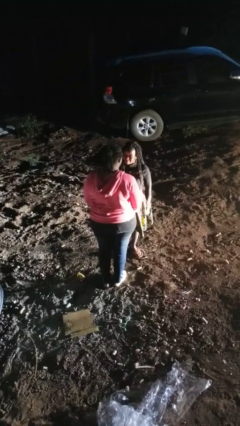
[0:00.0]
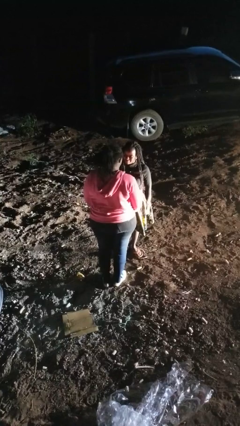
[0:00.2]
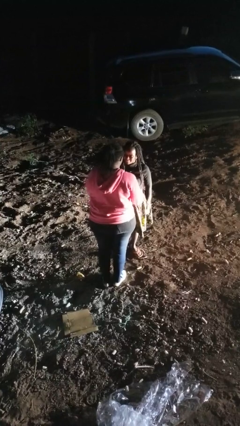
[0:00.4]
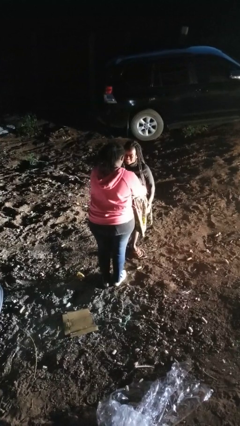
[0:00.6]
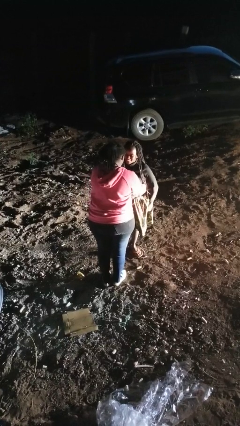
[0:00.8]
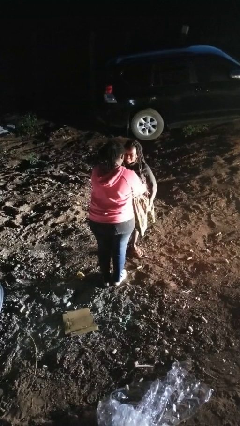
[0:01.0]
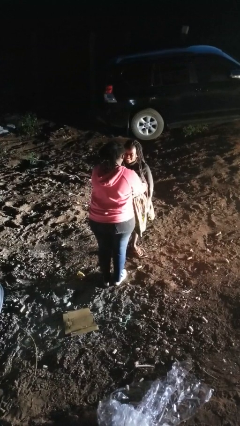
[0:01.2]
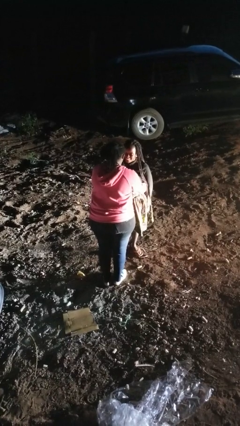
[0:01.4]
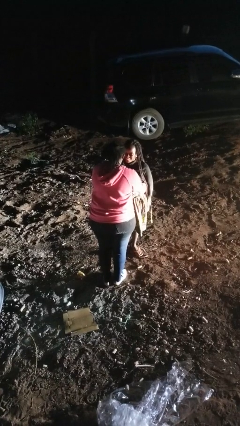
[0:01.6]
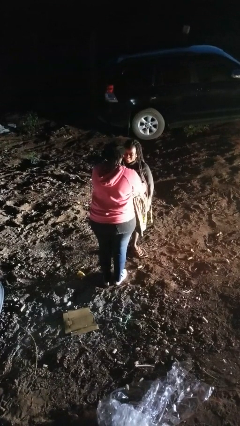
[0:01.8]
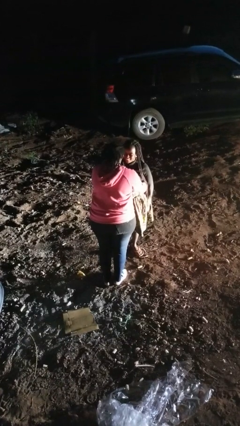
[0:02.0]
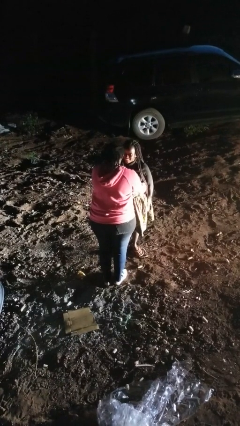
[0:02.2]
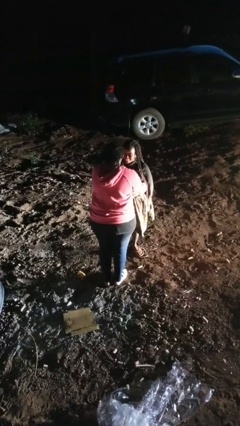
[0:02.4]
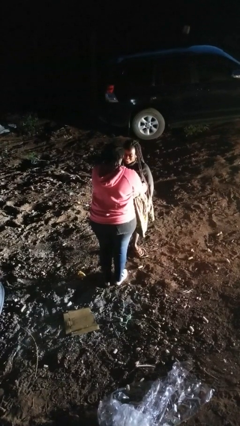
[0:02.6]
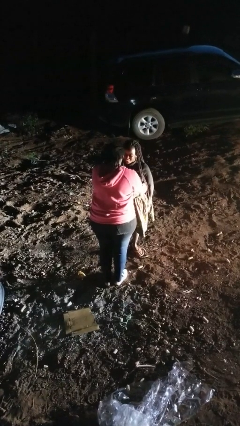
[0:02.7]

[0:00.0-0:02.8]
person tickles person

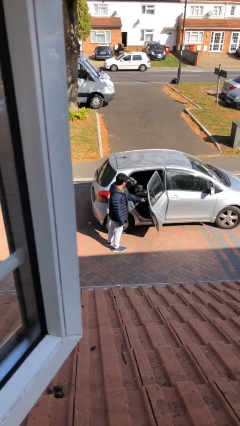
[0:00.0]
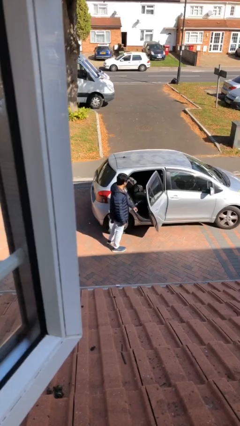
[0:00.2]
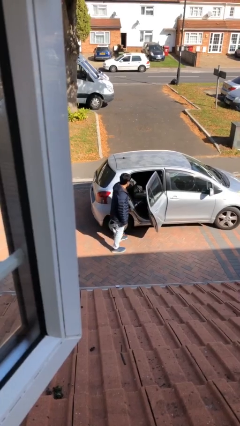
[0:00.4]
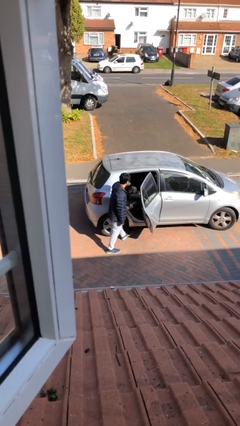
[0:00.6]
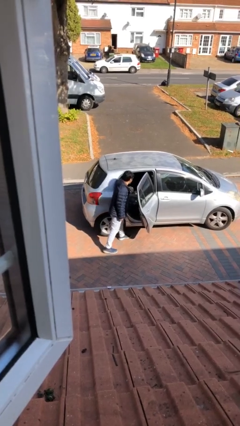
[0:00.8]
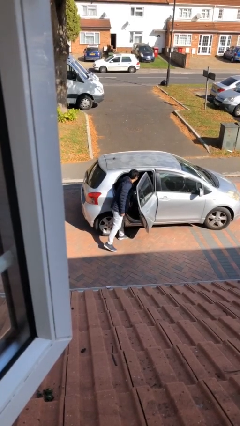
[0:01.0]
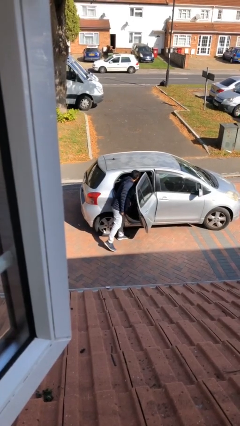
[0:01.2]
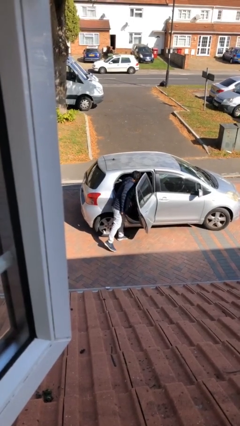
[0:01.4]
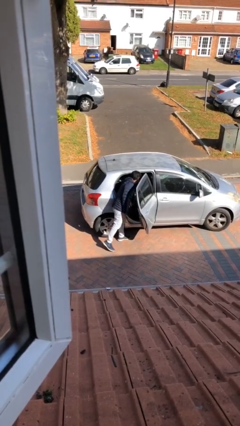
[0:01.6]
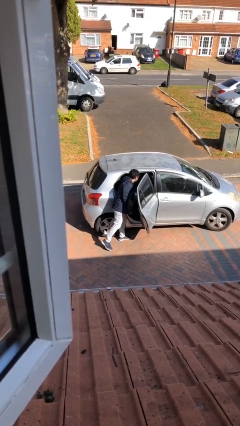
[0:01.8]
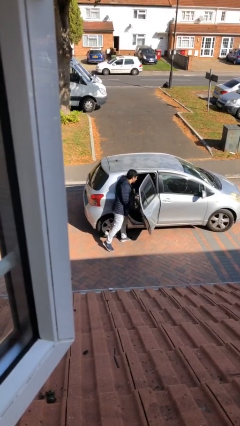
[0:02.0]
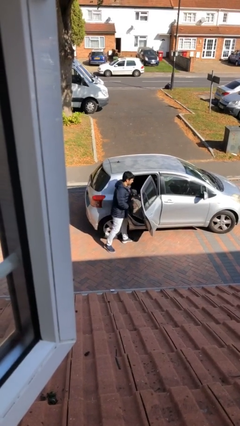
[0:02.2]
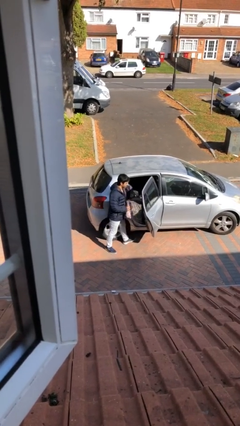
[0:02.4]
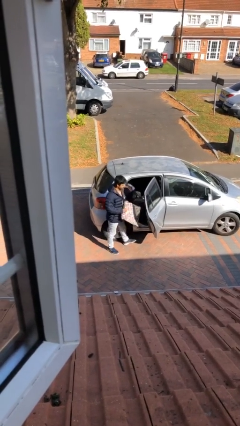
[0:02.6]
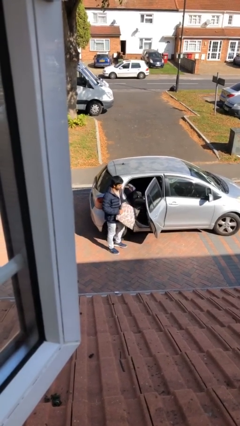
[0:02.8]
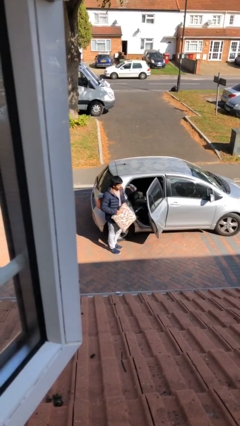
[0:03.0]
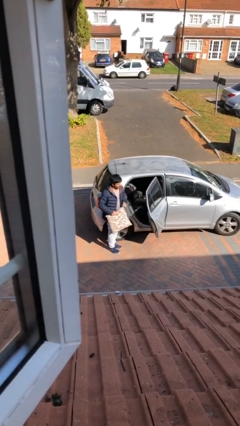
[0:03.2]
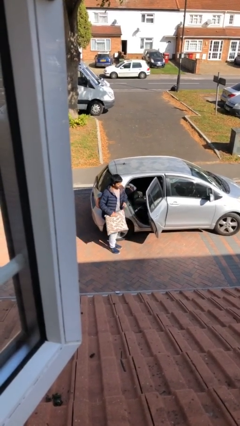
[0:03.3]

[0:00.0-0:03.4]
person unloads car

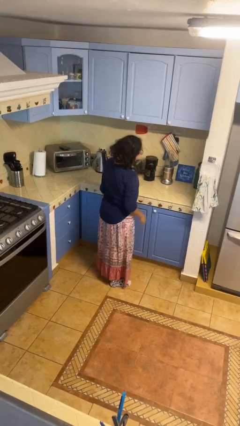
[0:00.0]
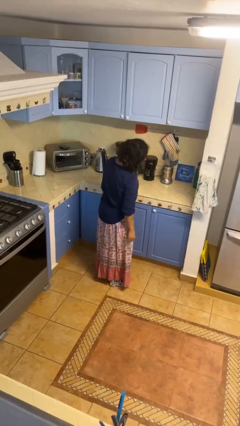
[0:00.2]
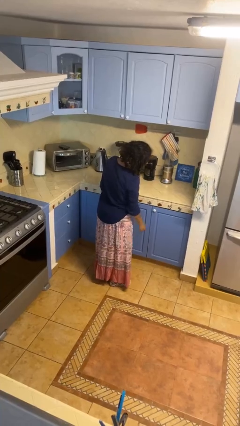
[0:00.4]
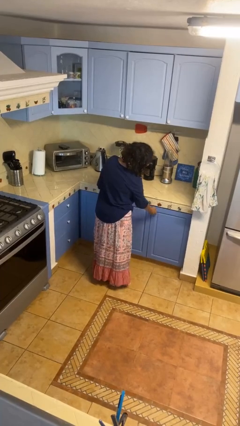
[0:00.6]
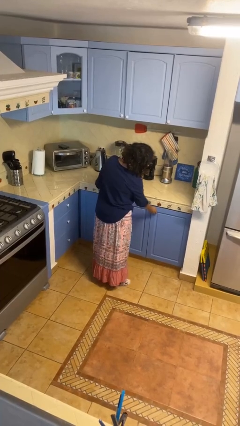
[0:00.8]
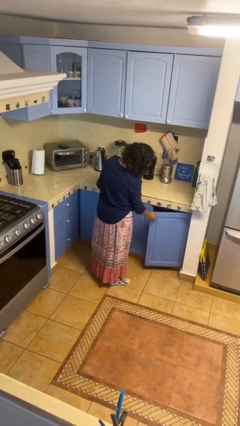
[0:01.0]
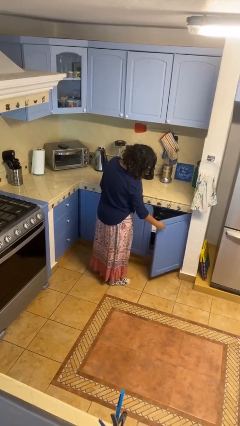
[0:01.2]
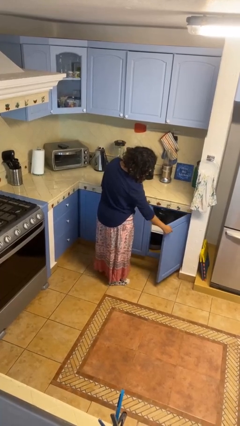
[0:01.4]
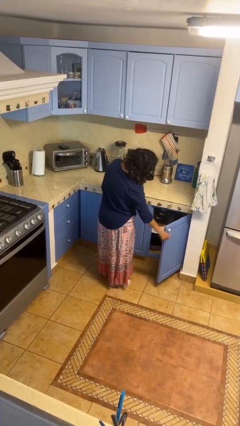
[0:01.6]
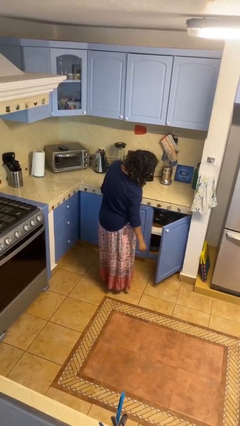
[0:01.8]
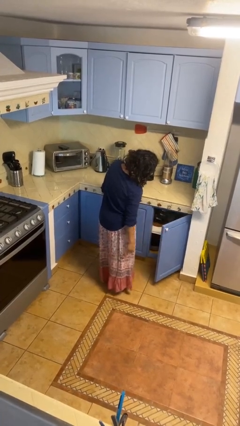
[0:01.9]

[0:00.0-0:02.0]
person opens cabinet

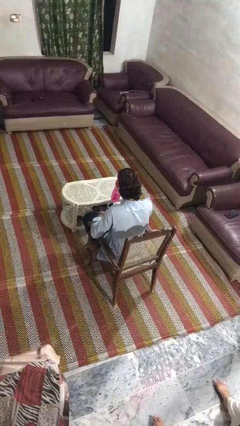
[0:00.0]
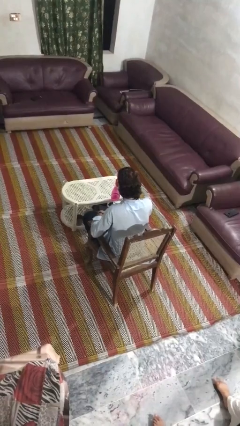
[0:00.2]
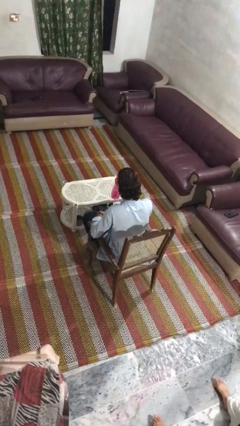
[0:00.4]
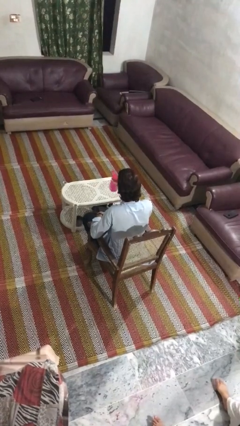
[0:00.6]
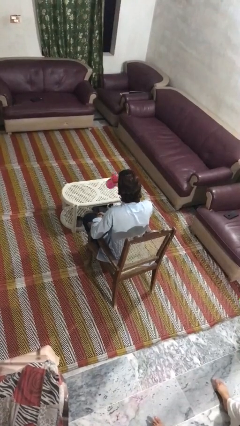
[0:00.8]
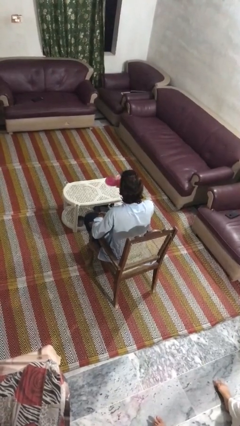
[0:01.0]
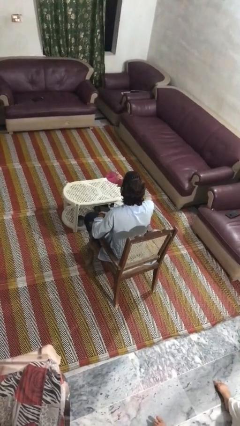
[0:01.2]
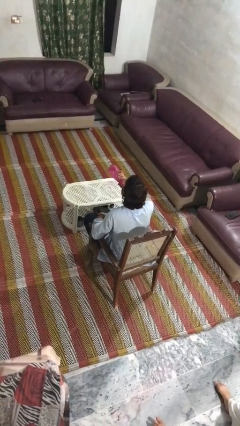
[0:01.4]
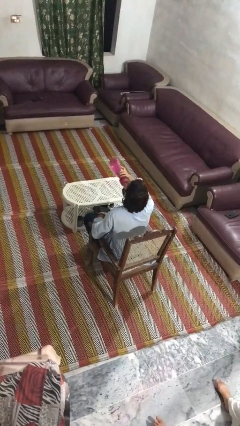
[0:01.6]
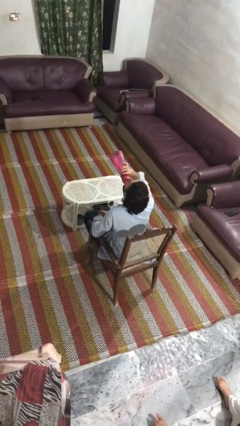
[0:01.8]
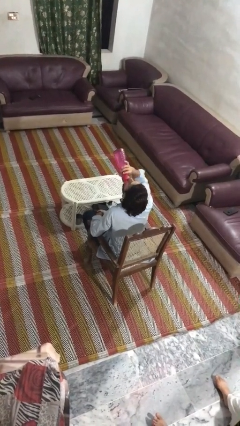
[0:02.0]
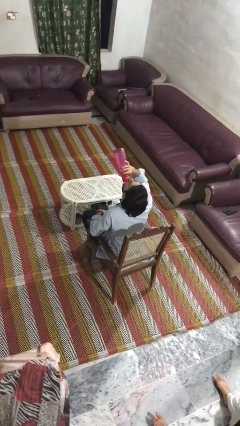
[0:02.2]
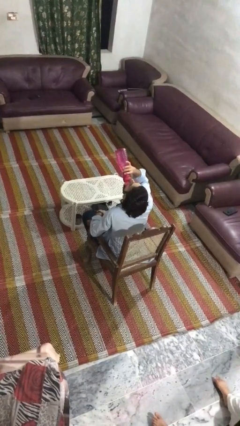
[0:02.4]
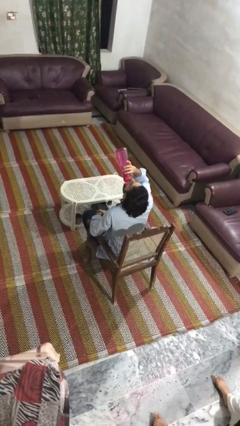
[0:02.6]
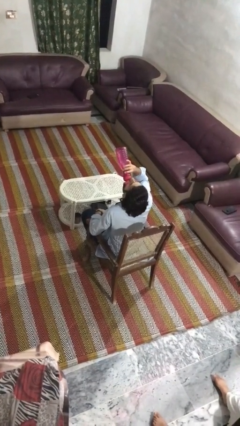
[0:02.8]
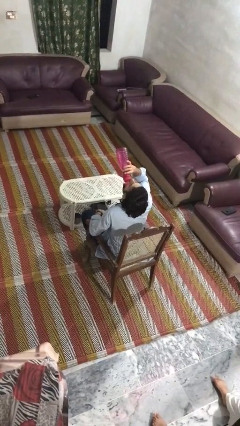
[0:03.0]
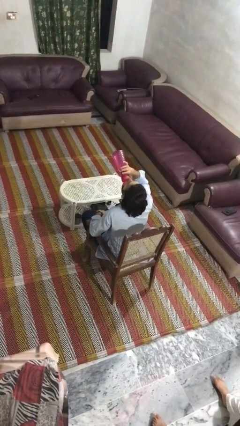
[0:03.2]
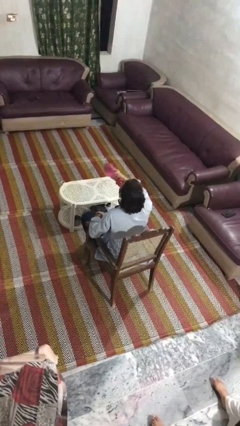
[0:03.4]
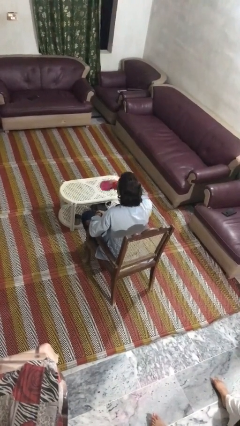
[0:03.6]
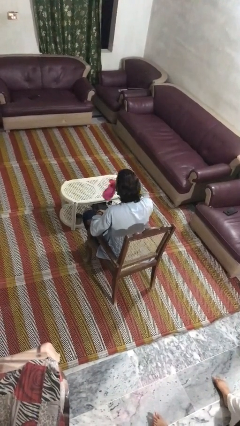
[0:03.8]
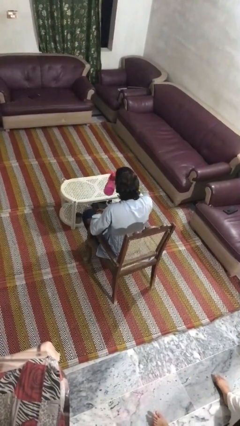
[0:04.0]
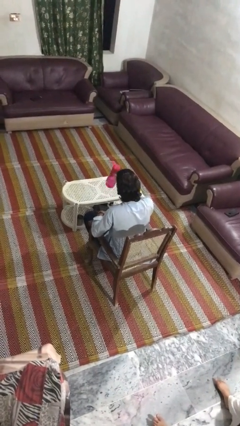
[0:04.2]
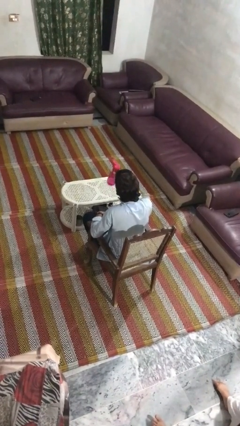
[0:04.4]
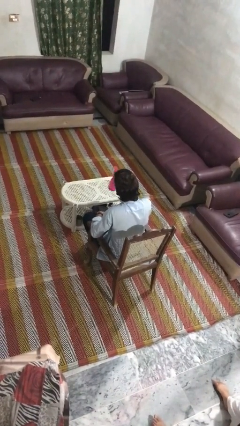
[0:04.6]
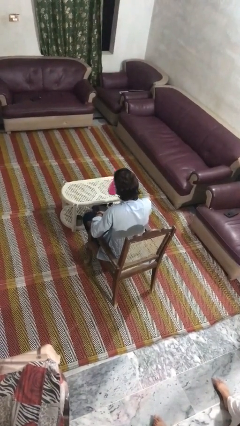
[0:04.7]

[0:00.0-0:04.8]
person drinks from bottle

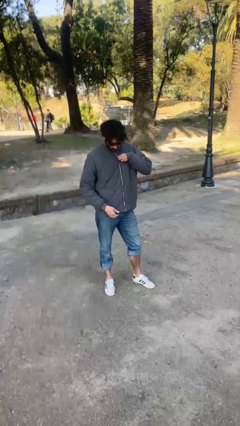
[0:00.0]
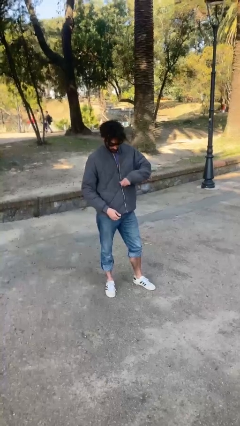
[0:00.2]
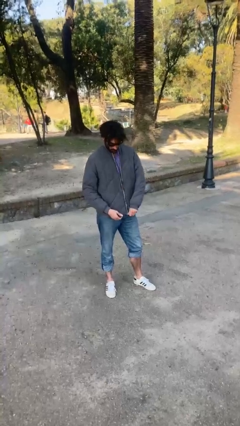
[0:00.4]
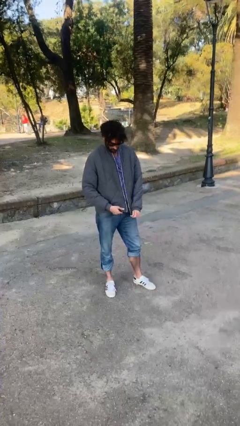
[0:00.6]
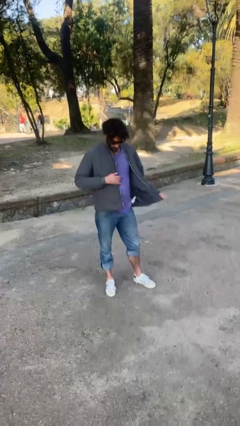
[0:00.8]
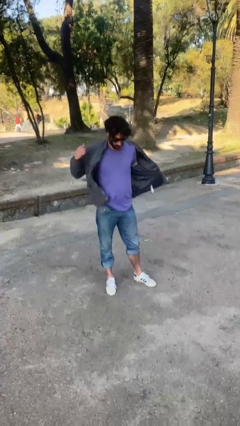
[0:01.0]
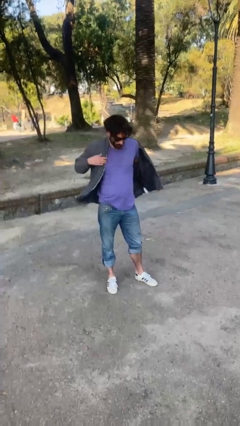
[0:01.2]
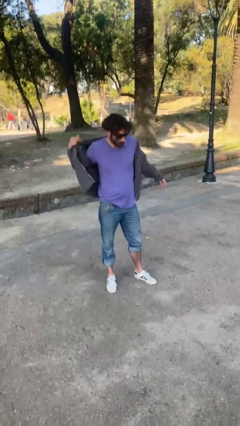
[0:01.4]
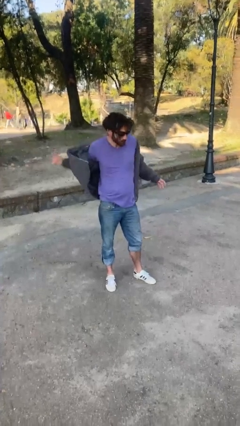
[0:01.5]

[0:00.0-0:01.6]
person unzips jacket

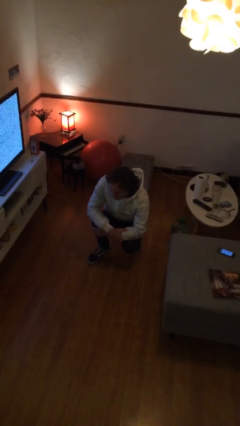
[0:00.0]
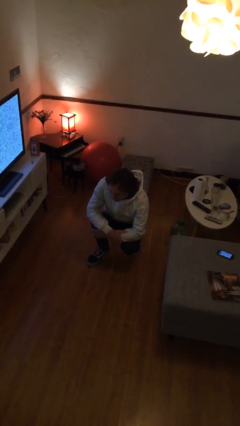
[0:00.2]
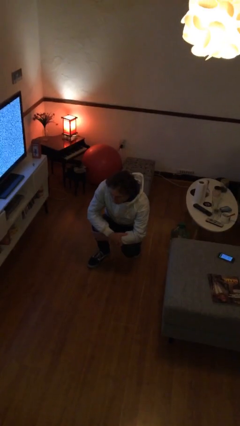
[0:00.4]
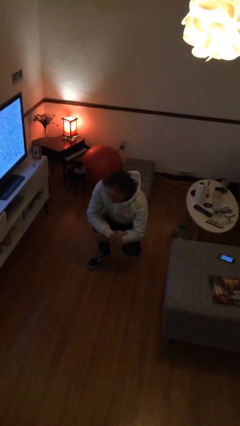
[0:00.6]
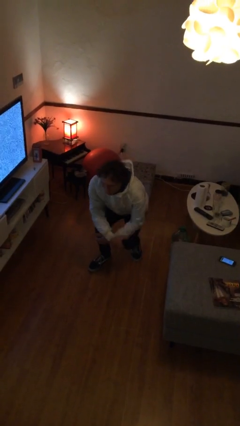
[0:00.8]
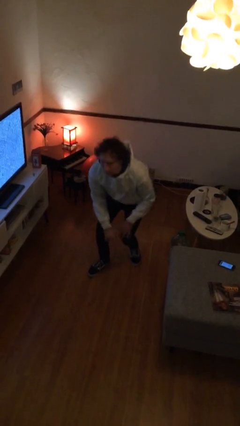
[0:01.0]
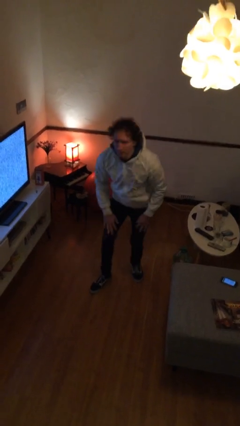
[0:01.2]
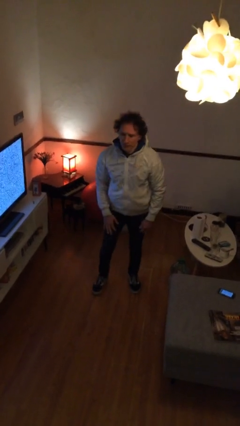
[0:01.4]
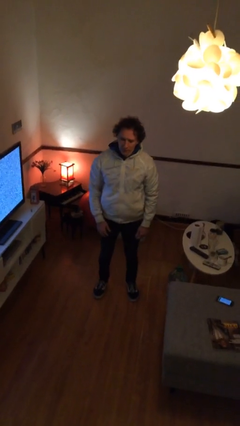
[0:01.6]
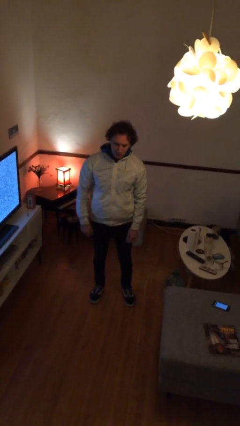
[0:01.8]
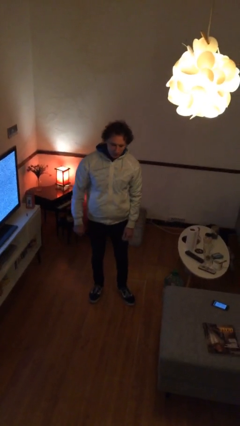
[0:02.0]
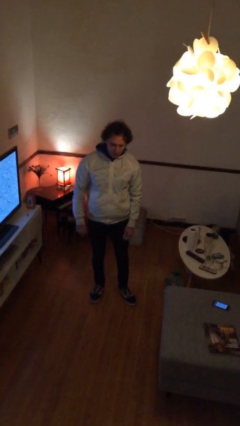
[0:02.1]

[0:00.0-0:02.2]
person stands up

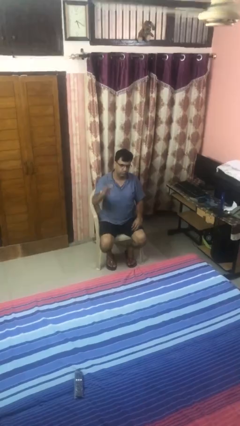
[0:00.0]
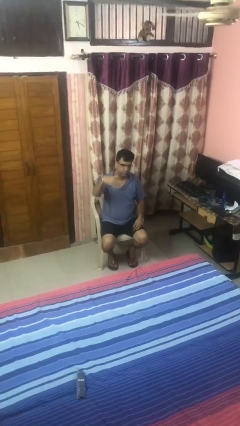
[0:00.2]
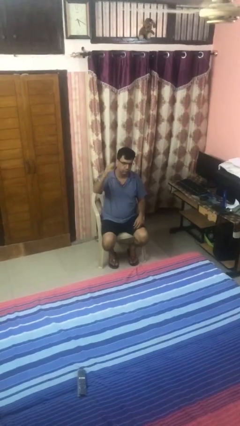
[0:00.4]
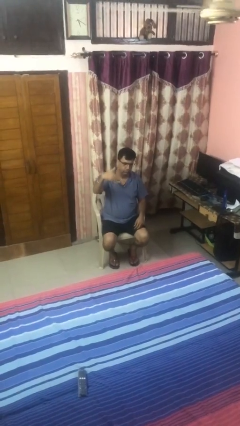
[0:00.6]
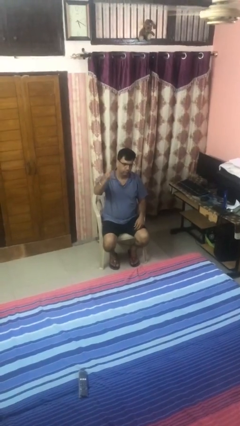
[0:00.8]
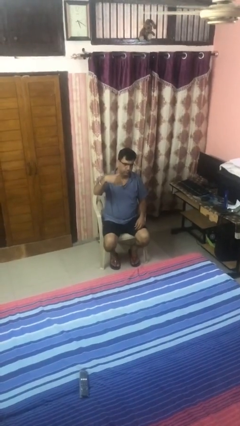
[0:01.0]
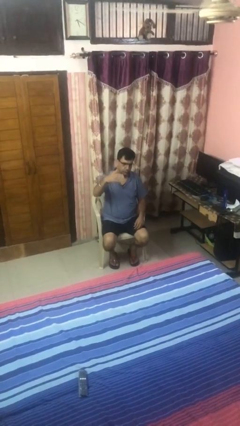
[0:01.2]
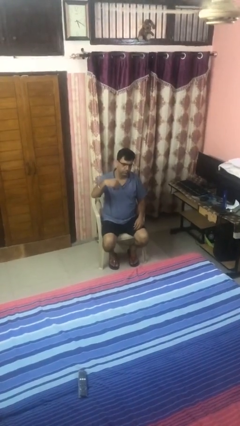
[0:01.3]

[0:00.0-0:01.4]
person gestures come here
